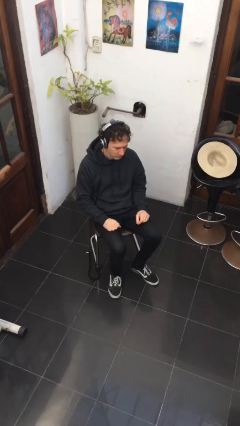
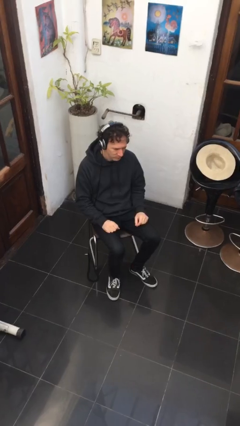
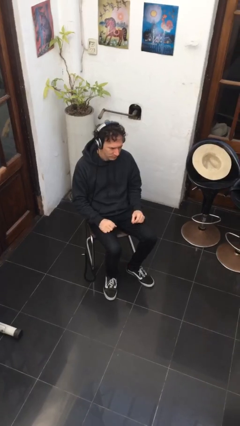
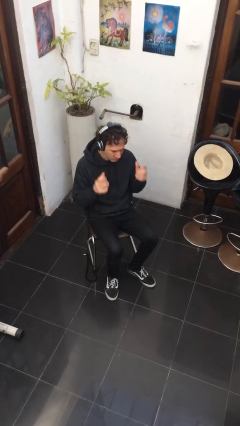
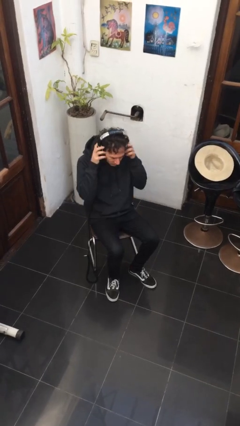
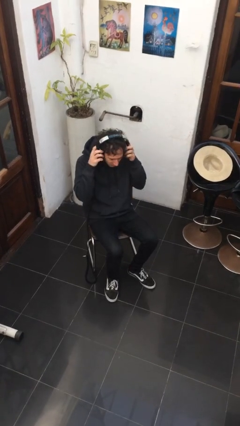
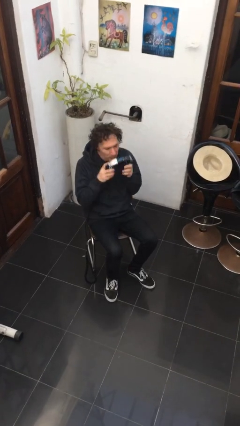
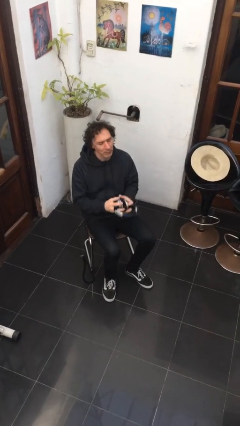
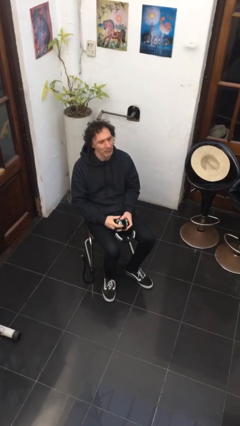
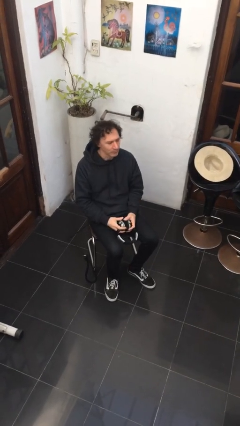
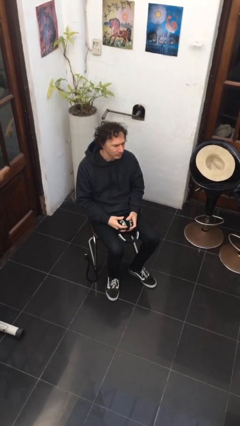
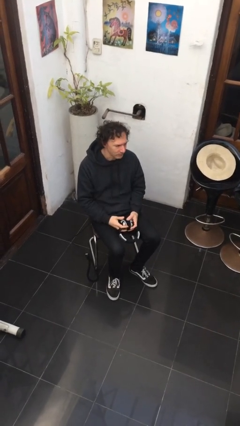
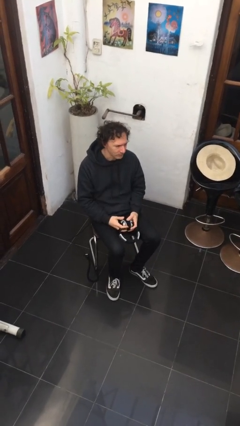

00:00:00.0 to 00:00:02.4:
person takes off headphones

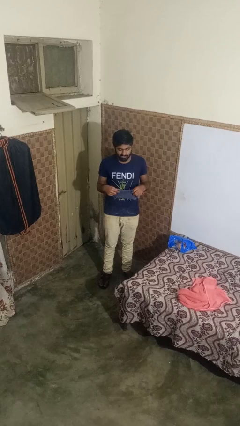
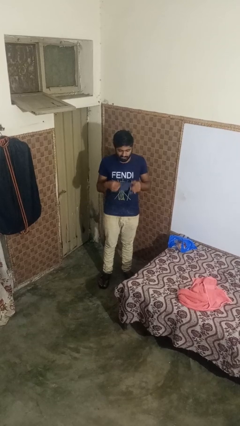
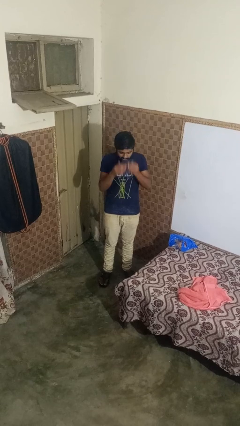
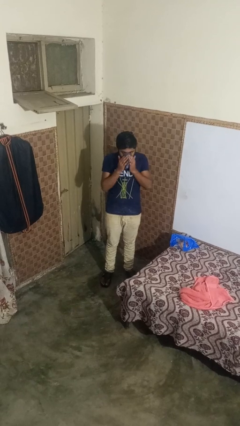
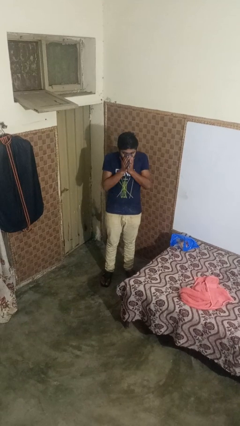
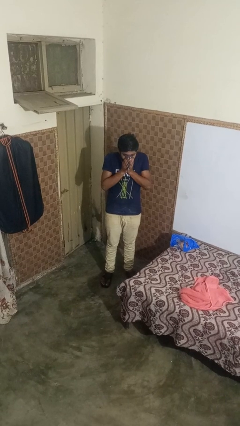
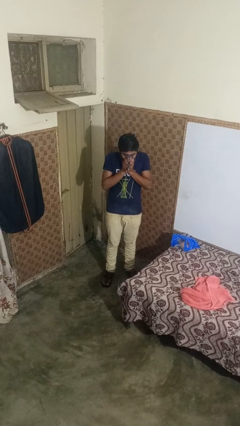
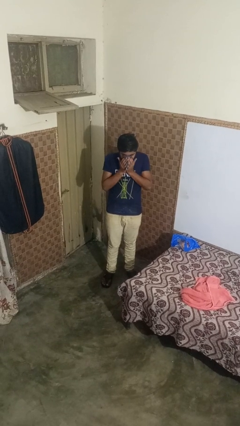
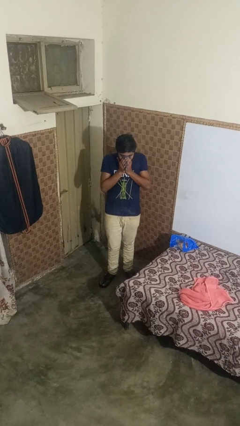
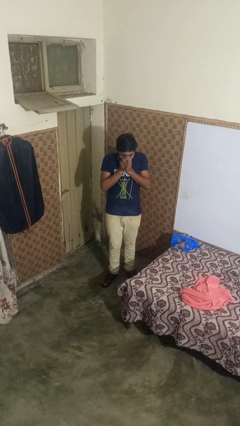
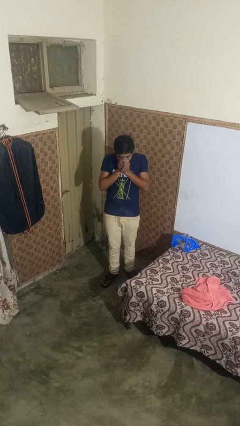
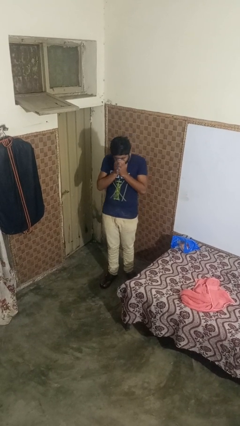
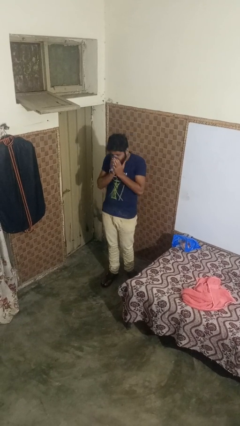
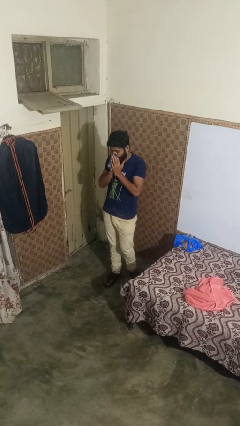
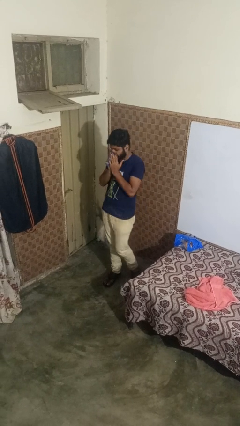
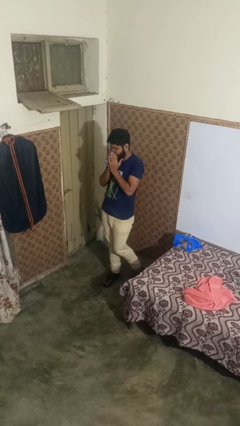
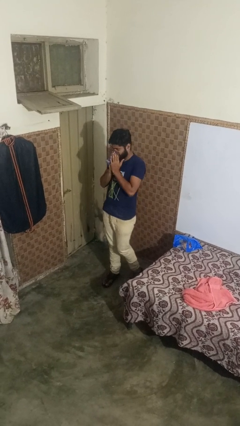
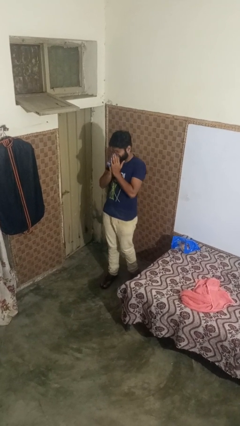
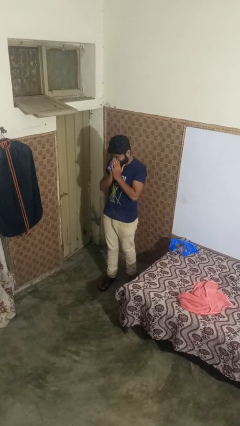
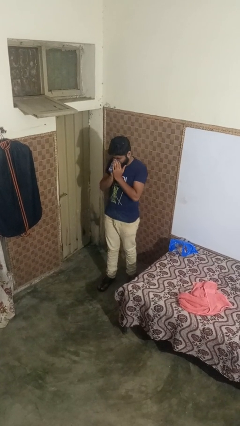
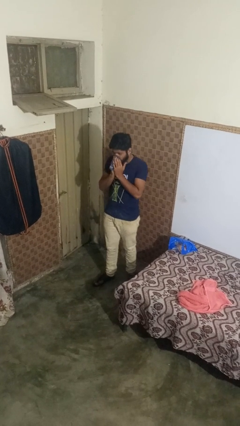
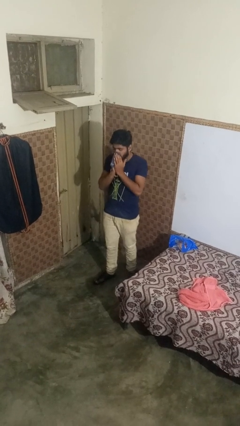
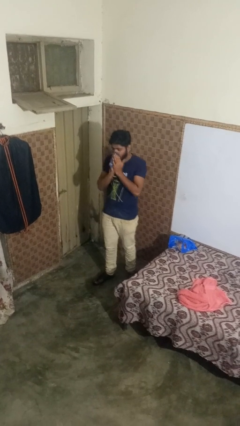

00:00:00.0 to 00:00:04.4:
person blows nose

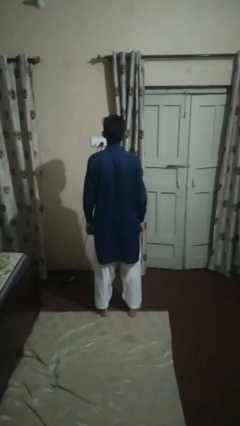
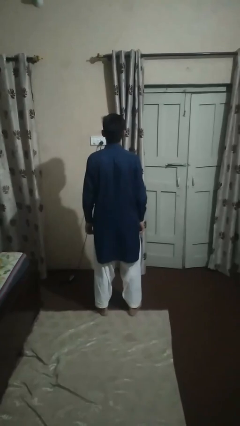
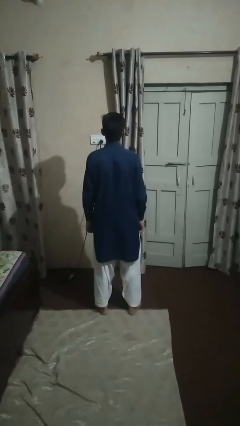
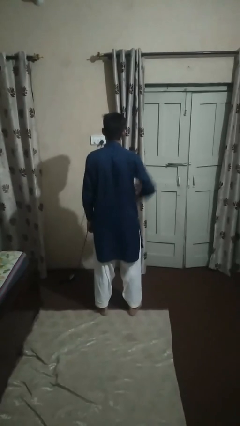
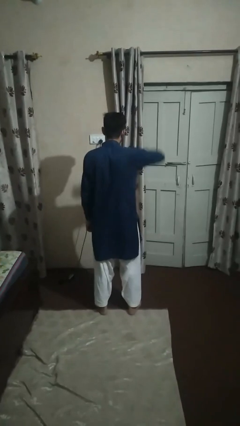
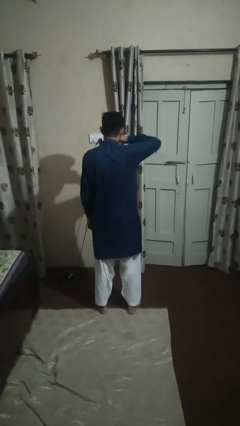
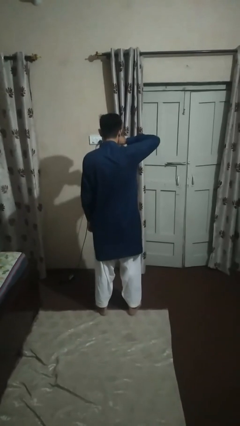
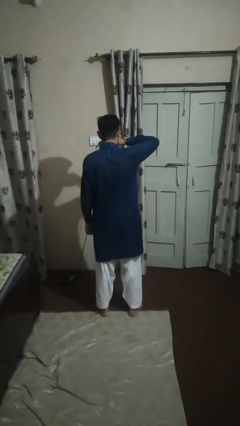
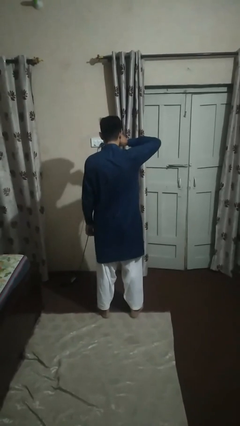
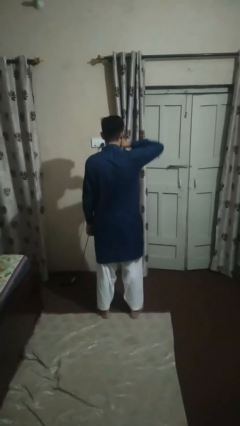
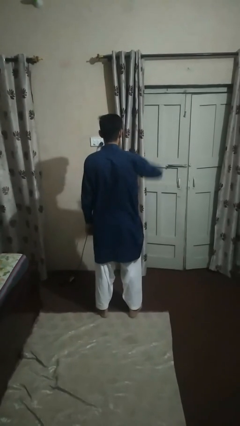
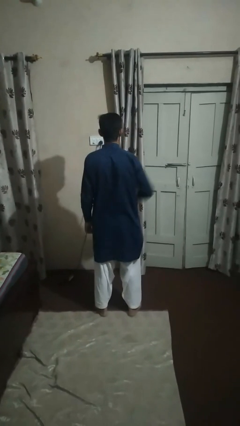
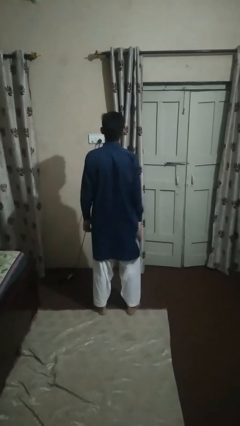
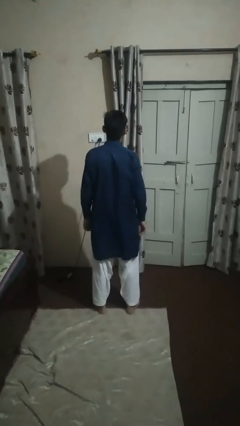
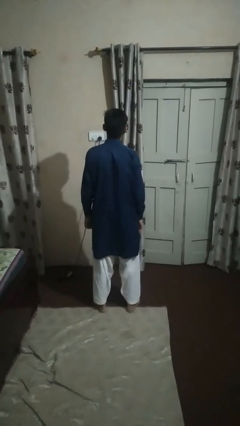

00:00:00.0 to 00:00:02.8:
person rubs eyes

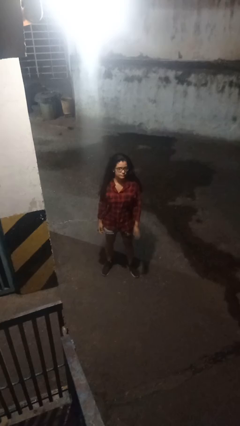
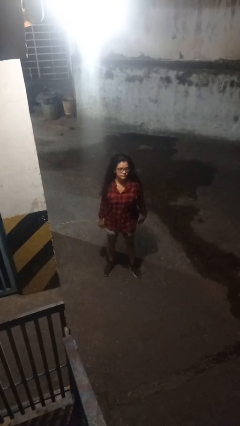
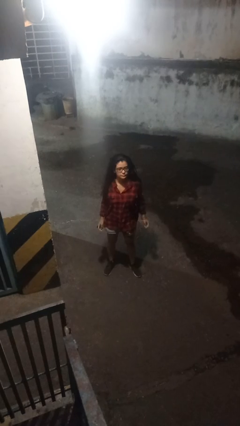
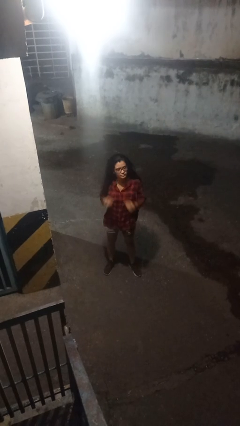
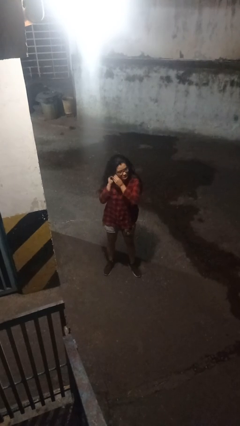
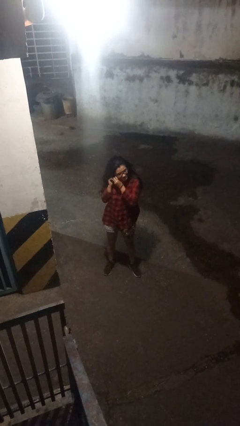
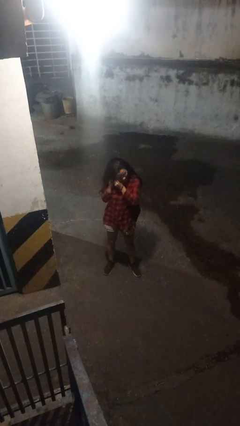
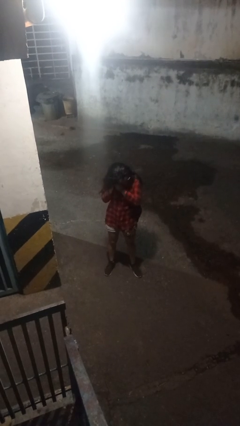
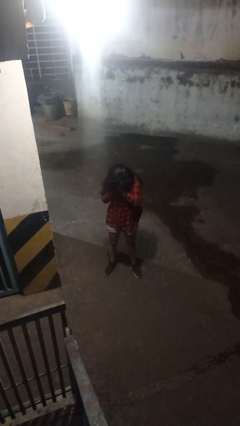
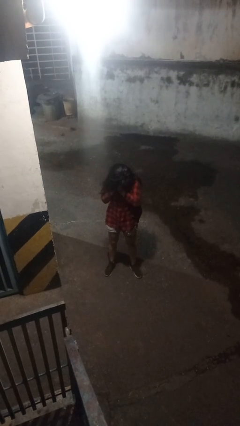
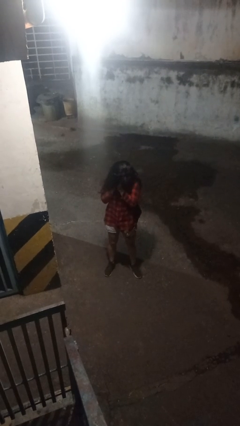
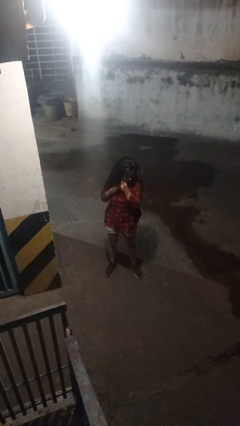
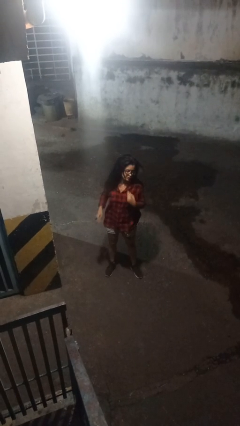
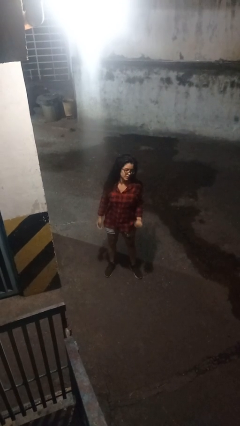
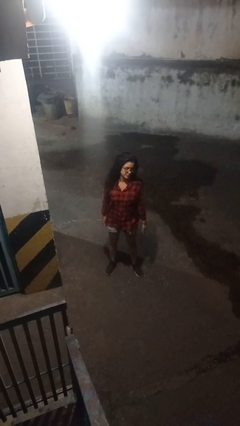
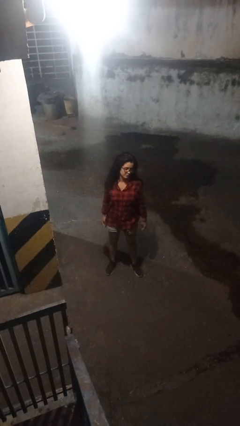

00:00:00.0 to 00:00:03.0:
person takes off earrings

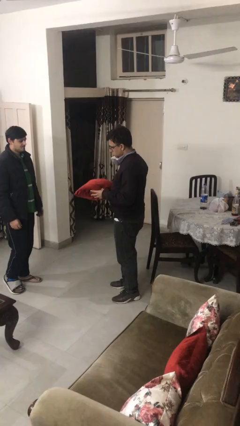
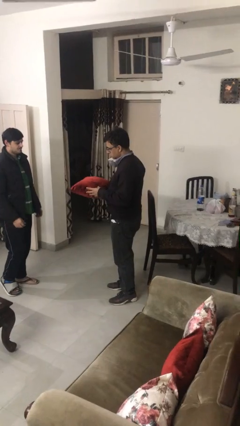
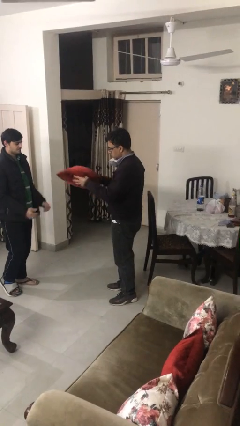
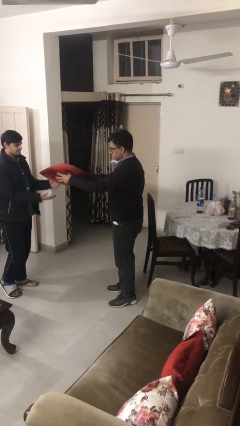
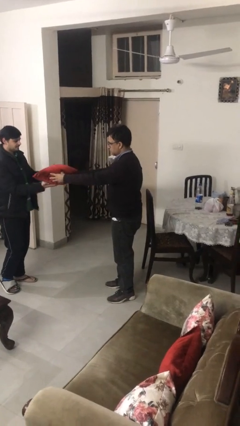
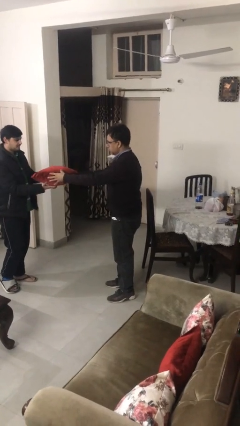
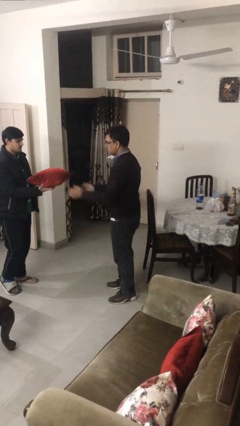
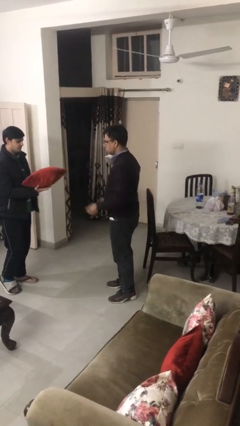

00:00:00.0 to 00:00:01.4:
person transfers object to person

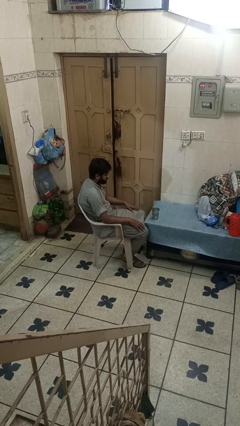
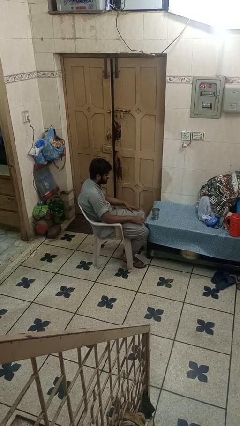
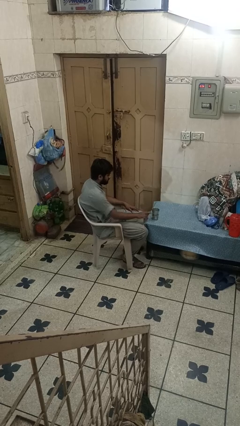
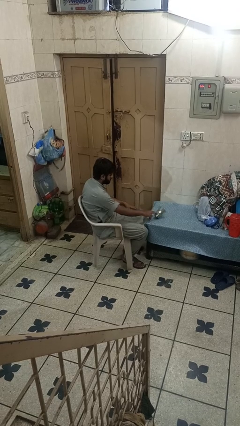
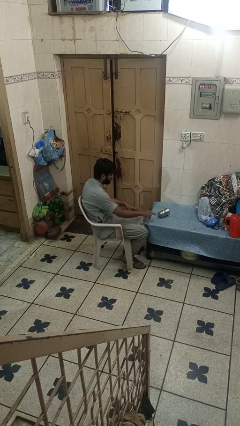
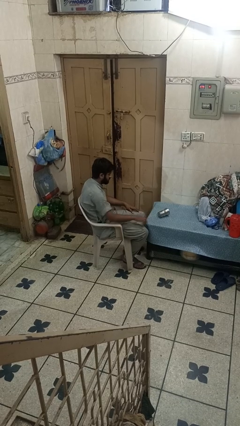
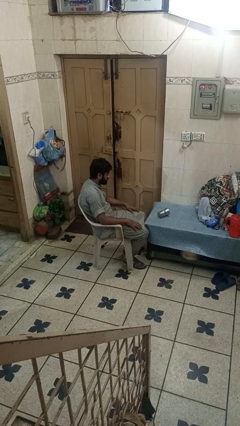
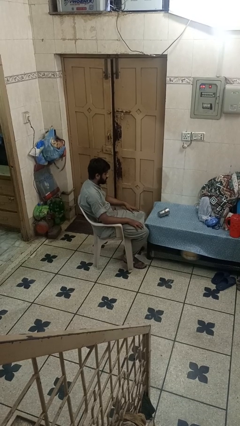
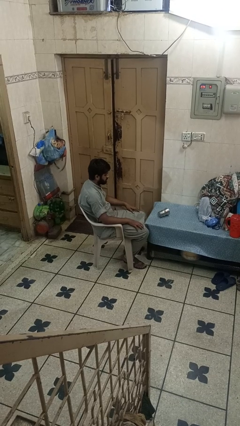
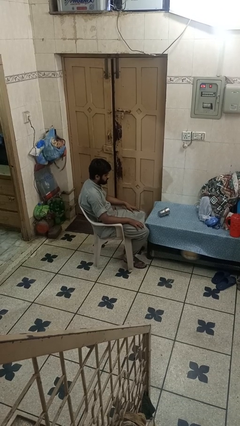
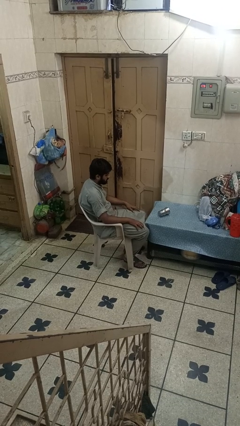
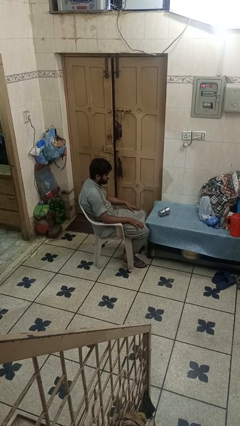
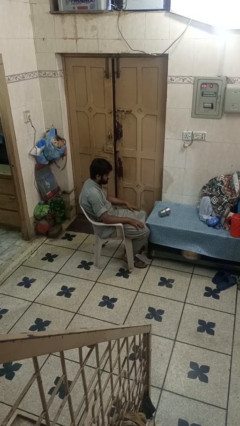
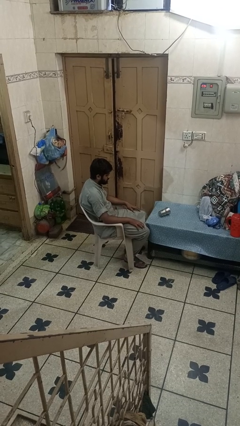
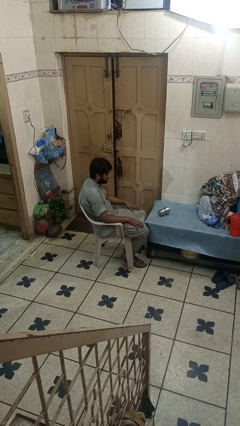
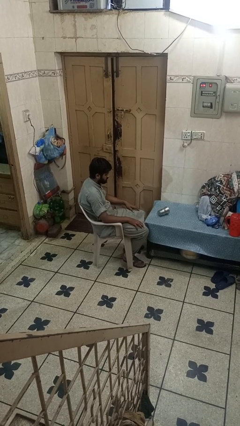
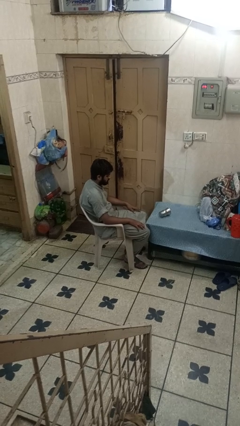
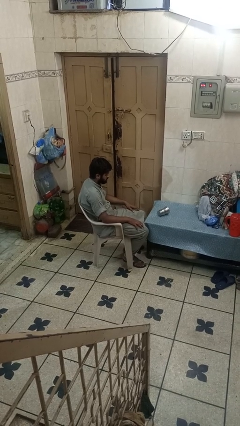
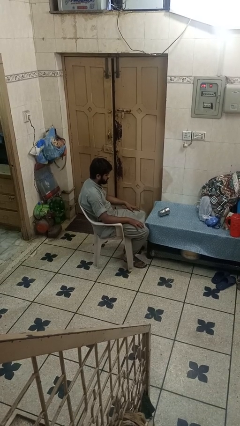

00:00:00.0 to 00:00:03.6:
person knocks over glass
